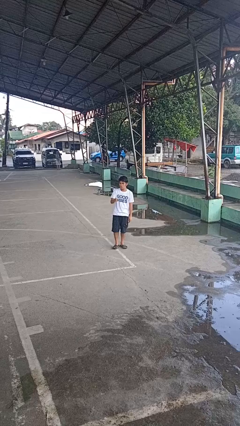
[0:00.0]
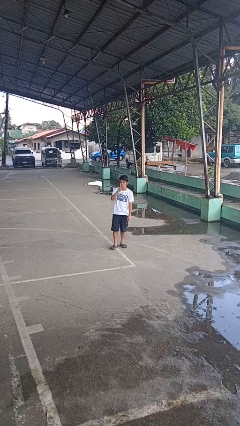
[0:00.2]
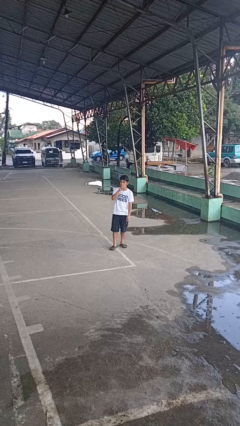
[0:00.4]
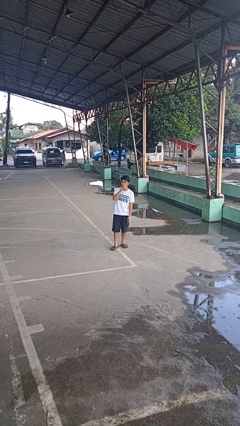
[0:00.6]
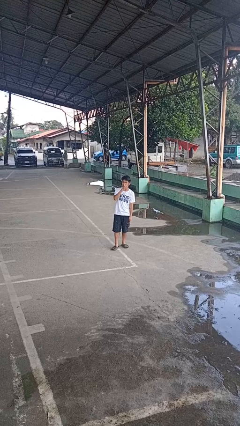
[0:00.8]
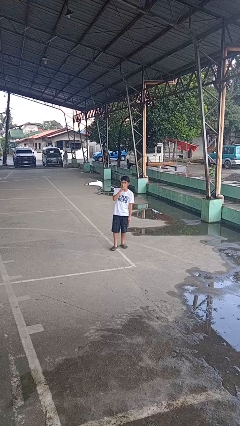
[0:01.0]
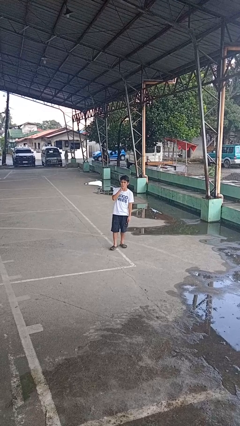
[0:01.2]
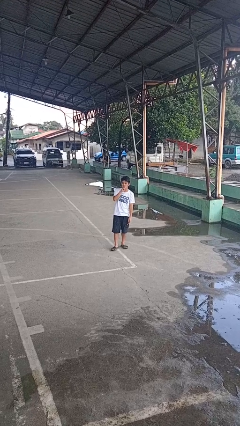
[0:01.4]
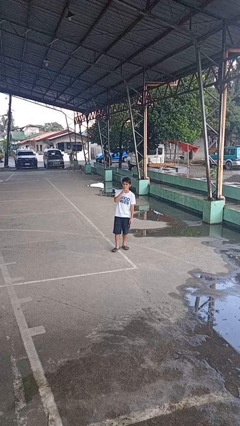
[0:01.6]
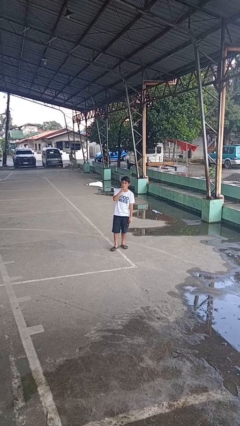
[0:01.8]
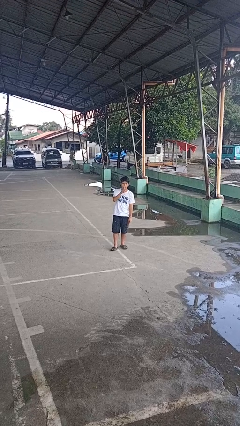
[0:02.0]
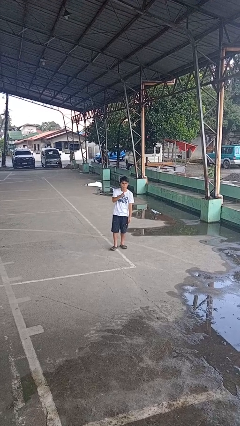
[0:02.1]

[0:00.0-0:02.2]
person gestures be quiet

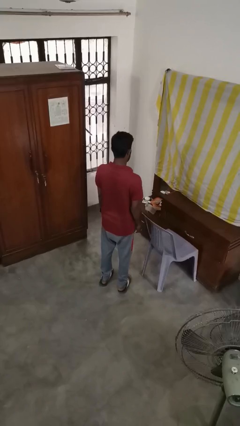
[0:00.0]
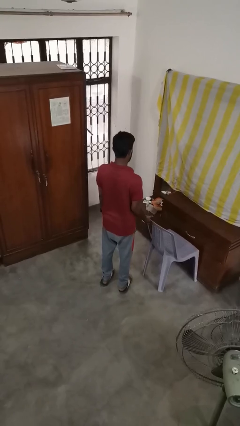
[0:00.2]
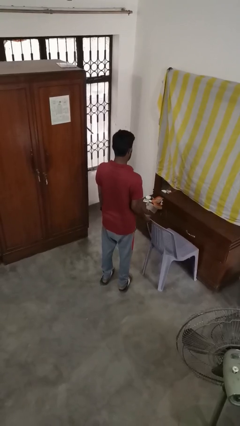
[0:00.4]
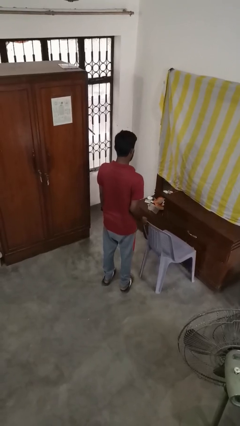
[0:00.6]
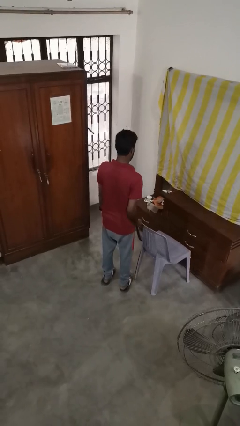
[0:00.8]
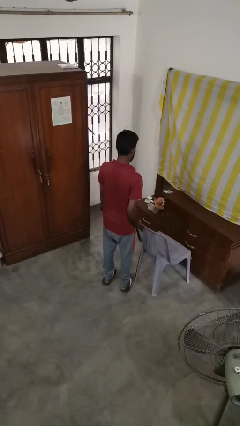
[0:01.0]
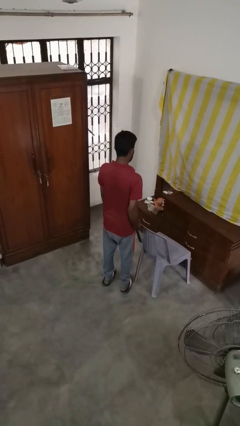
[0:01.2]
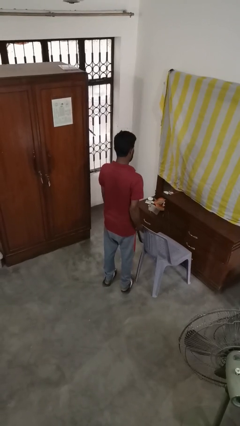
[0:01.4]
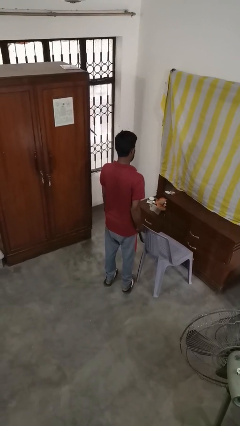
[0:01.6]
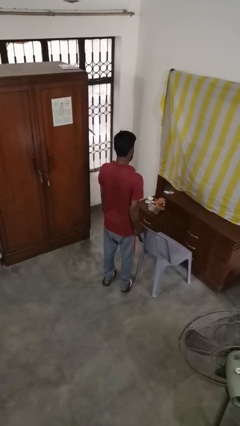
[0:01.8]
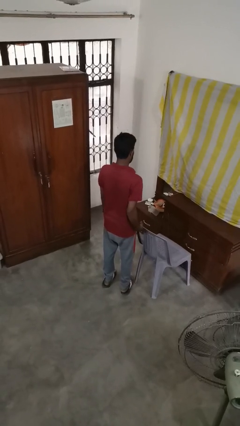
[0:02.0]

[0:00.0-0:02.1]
person pulls out chair

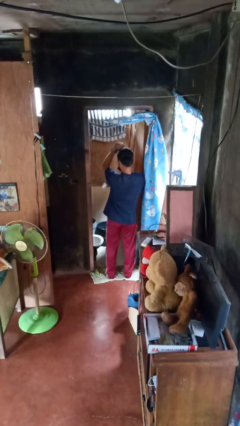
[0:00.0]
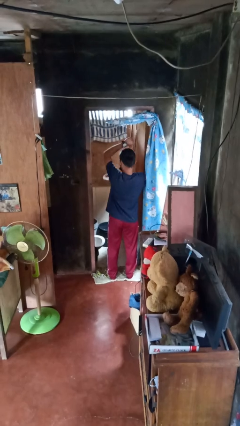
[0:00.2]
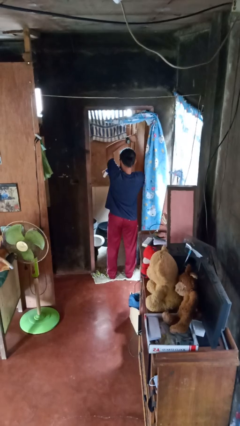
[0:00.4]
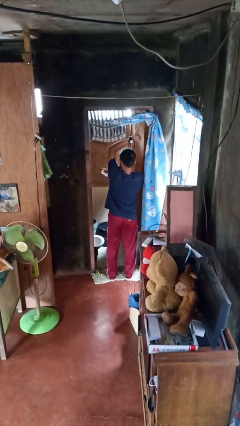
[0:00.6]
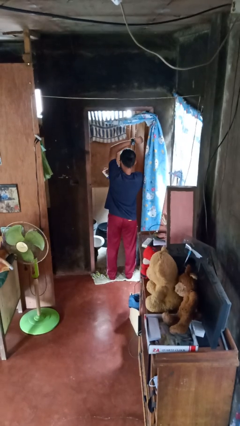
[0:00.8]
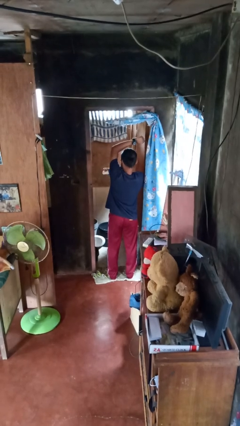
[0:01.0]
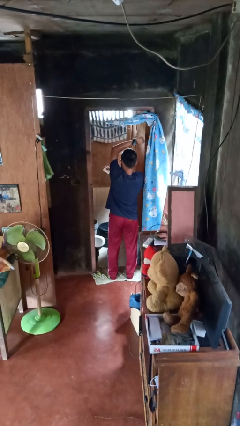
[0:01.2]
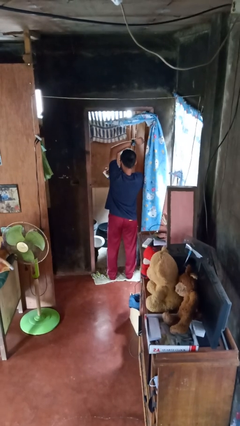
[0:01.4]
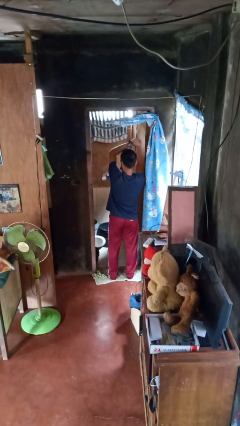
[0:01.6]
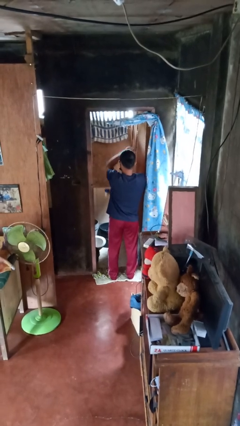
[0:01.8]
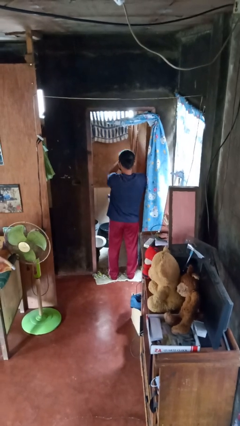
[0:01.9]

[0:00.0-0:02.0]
person applies deodorant

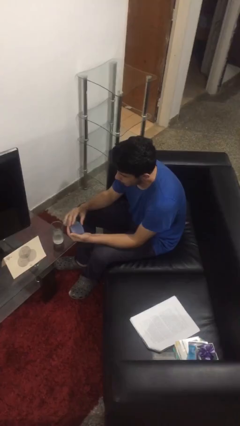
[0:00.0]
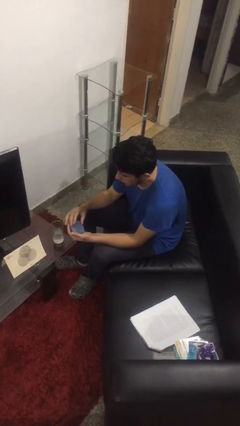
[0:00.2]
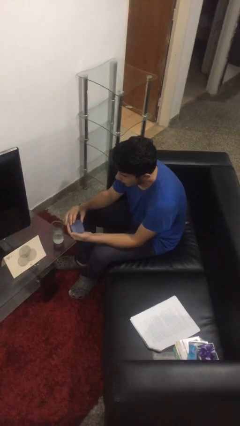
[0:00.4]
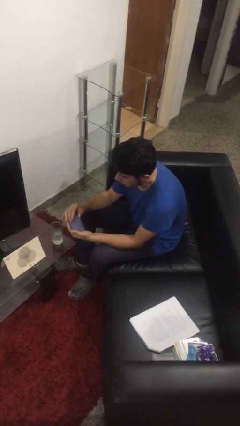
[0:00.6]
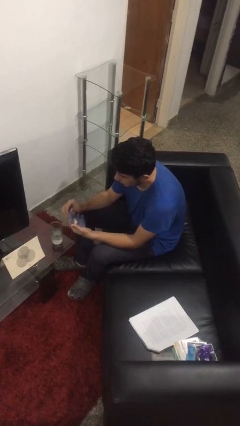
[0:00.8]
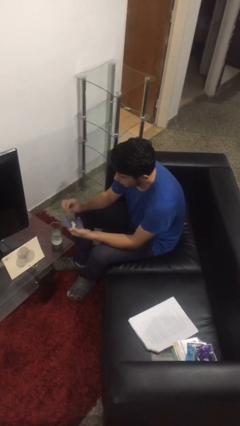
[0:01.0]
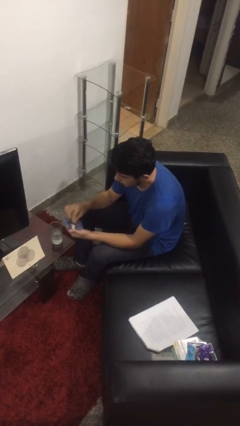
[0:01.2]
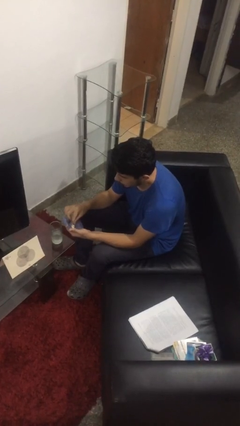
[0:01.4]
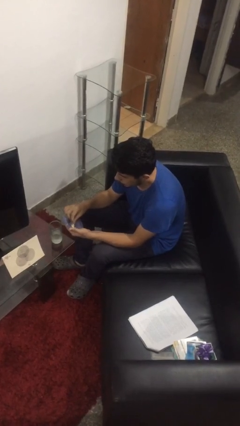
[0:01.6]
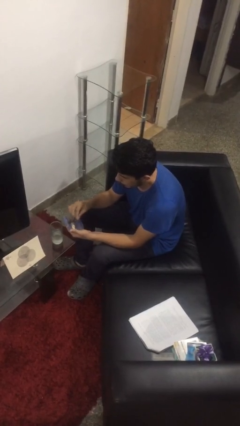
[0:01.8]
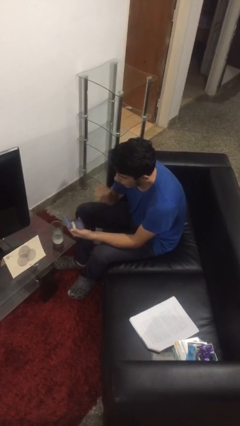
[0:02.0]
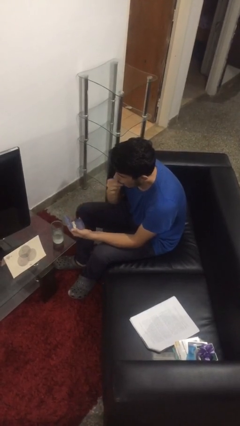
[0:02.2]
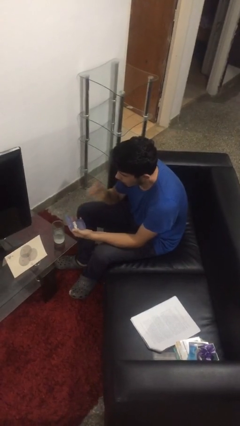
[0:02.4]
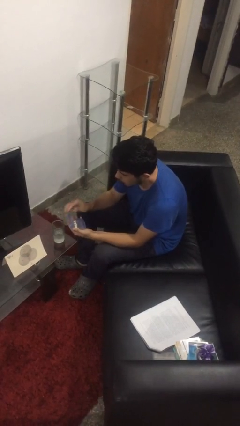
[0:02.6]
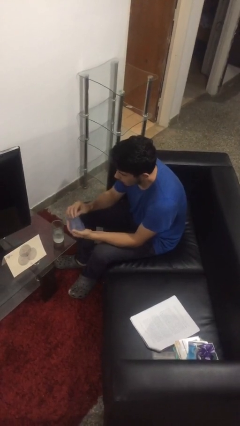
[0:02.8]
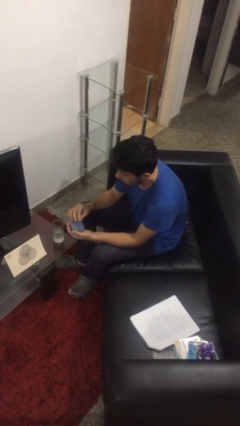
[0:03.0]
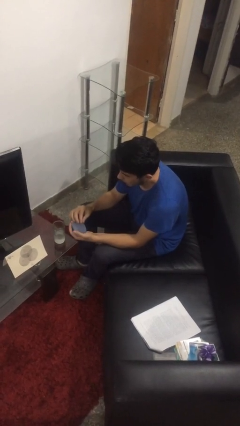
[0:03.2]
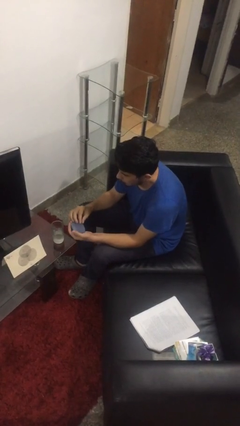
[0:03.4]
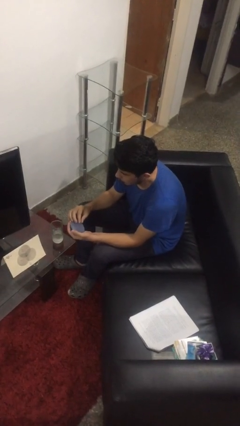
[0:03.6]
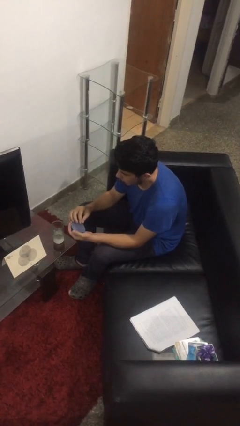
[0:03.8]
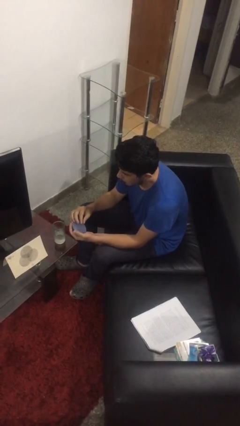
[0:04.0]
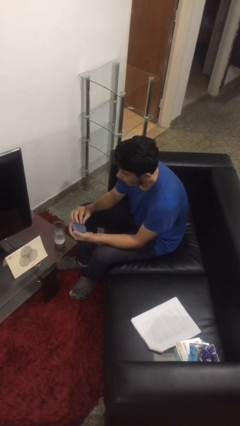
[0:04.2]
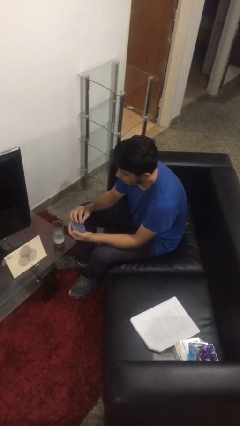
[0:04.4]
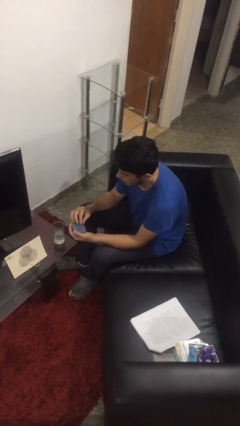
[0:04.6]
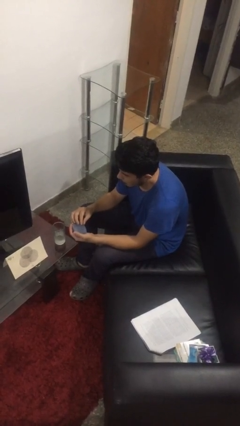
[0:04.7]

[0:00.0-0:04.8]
person takes medicine pills

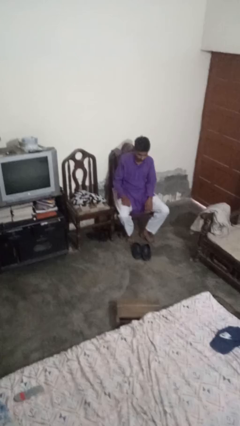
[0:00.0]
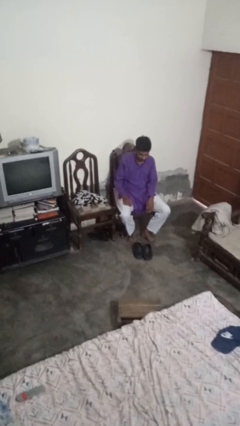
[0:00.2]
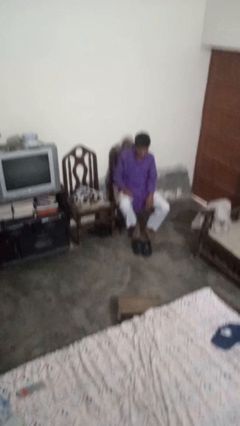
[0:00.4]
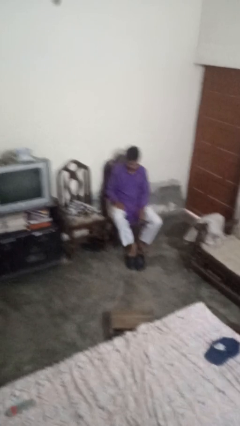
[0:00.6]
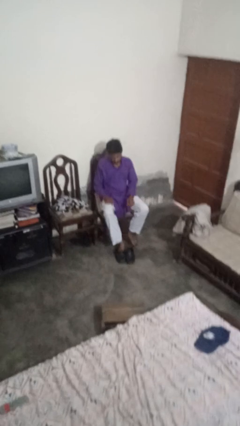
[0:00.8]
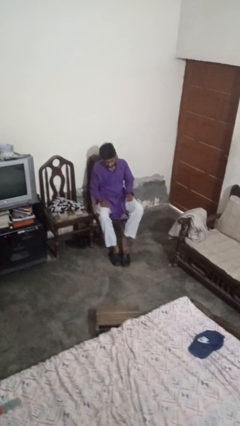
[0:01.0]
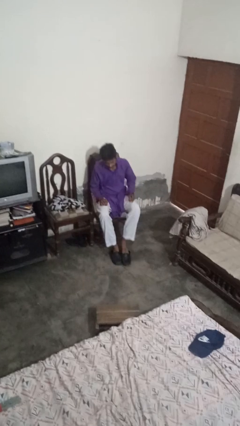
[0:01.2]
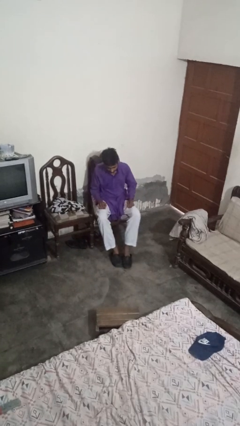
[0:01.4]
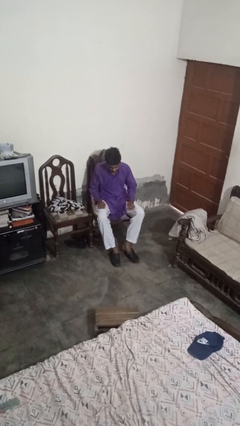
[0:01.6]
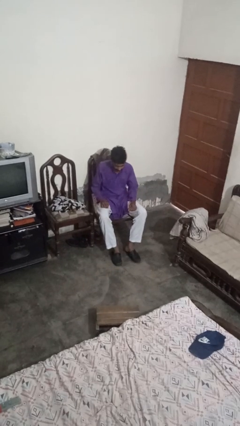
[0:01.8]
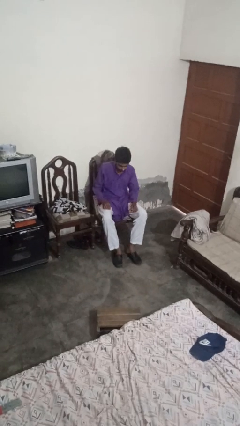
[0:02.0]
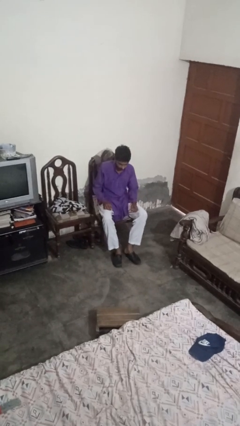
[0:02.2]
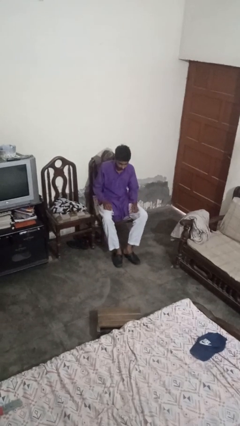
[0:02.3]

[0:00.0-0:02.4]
person puts on shoes

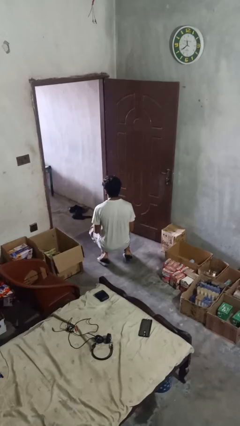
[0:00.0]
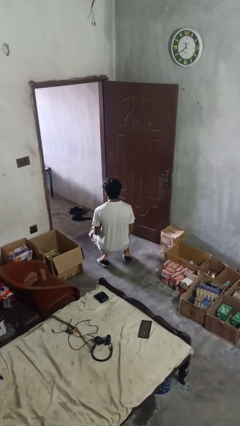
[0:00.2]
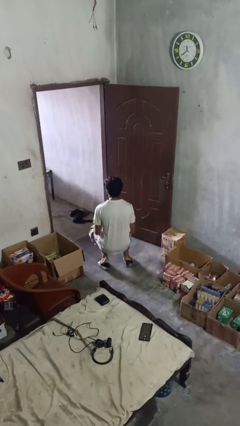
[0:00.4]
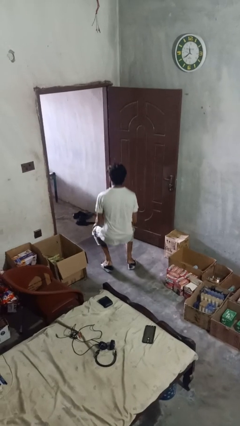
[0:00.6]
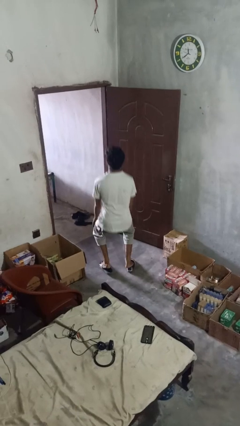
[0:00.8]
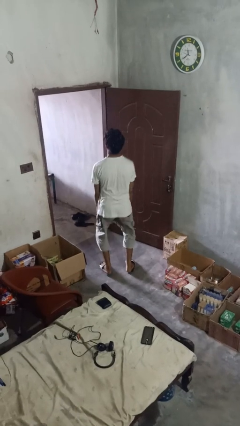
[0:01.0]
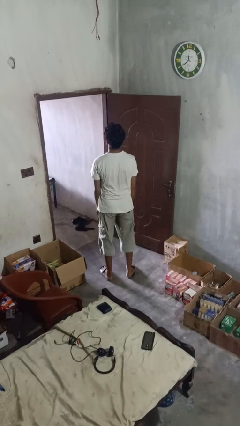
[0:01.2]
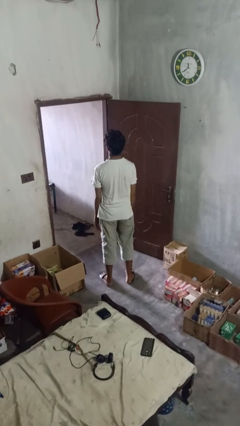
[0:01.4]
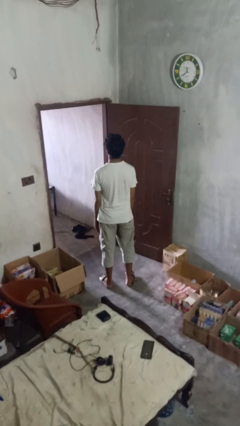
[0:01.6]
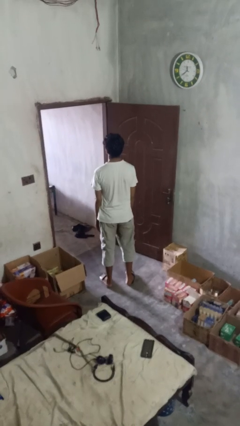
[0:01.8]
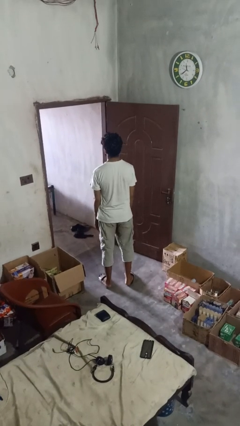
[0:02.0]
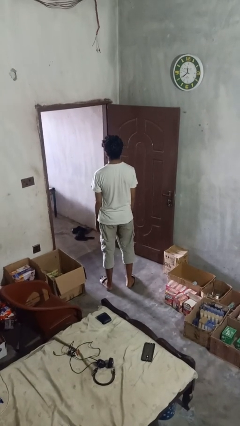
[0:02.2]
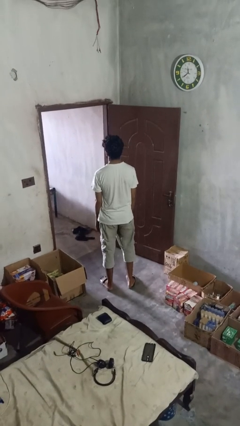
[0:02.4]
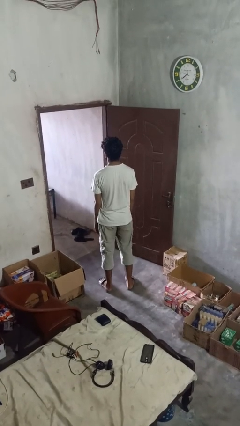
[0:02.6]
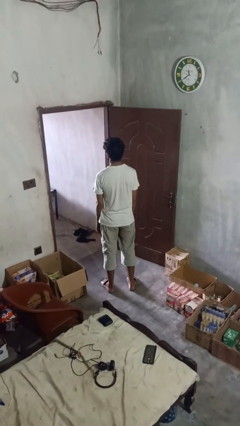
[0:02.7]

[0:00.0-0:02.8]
person stands up from floor

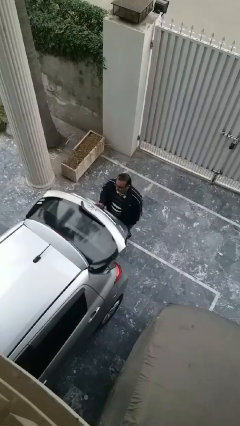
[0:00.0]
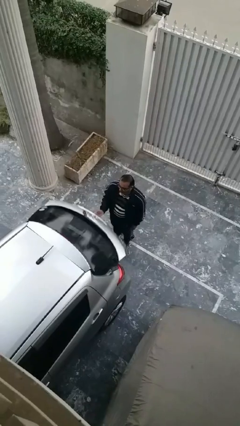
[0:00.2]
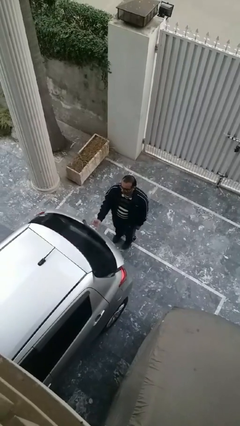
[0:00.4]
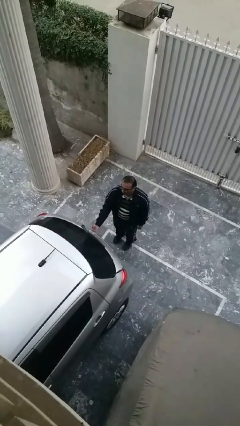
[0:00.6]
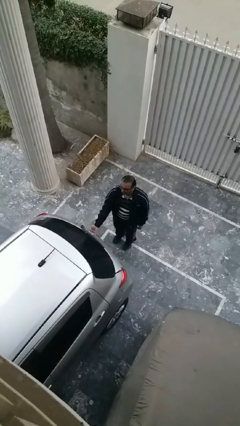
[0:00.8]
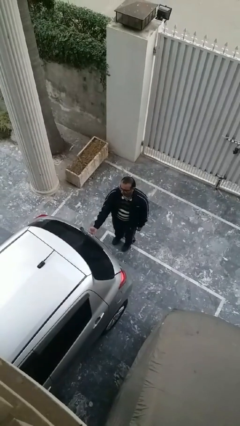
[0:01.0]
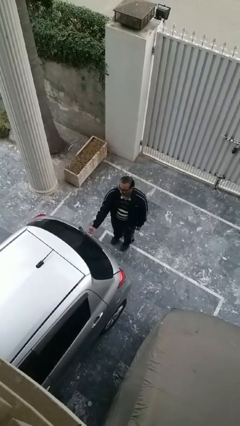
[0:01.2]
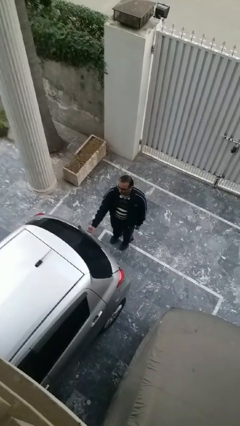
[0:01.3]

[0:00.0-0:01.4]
person closes car trunk
